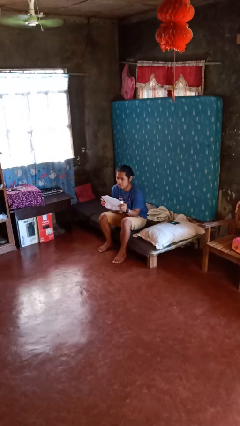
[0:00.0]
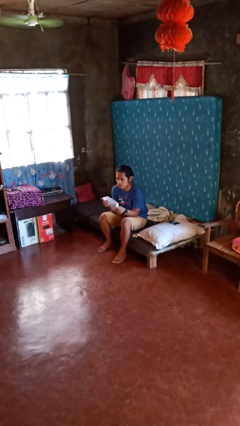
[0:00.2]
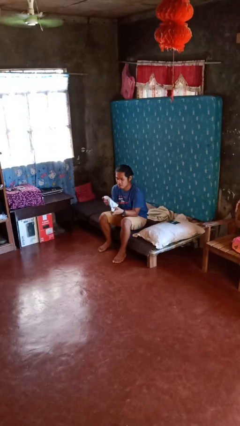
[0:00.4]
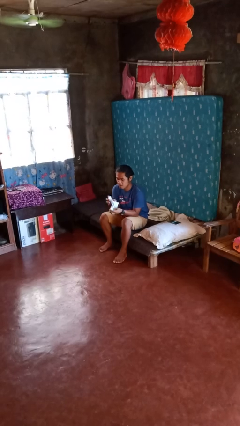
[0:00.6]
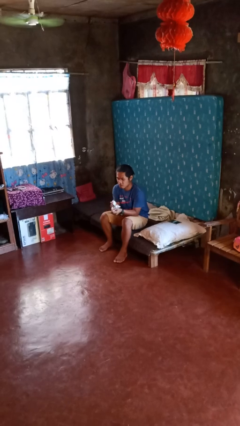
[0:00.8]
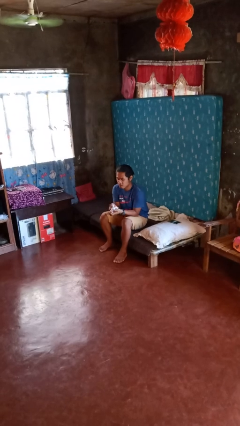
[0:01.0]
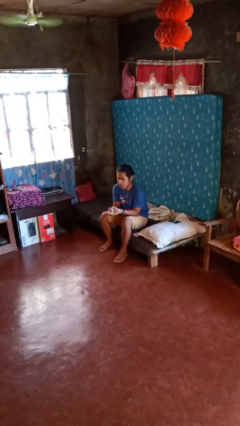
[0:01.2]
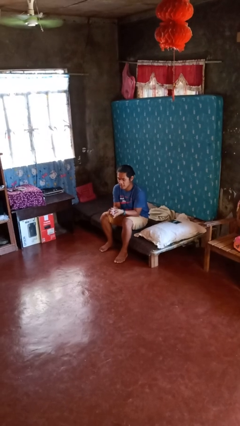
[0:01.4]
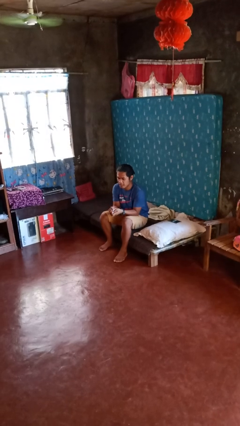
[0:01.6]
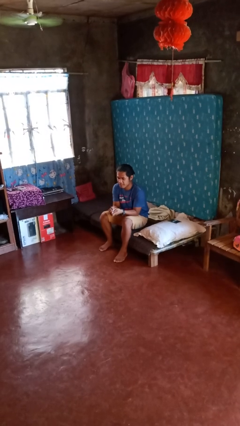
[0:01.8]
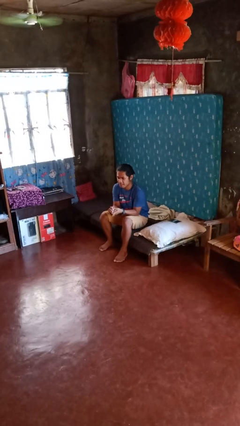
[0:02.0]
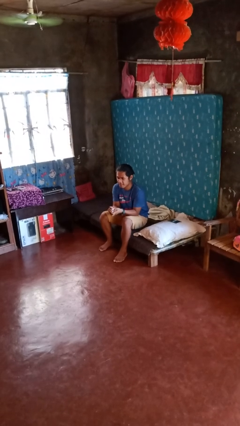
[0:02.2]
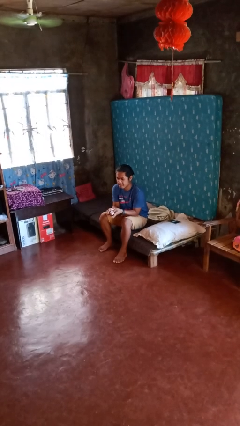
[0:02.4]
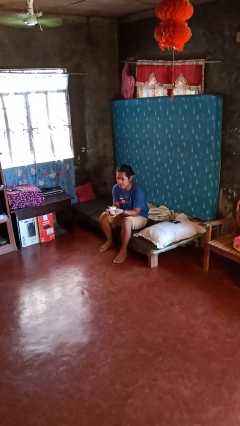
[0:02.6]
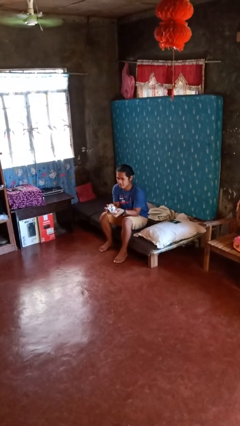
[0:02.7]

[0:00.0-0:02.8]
person crumples paper

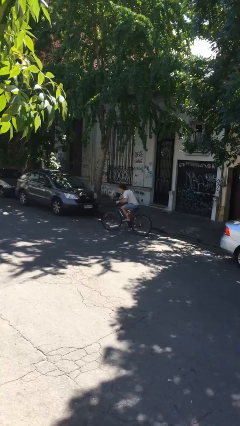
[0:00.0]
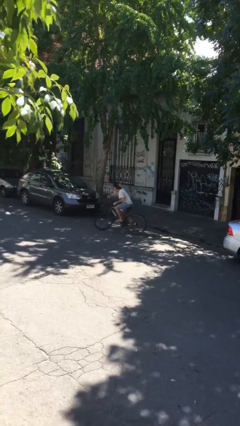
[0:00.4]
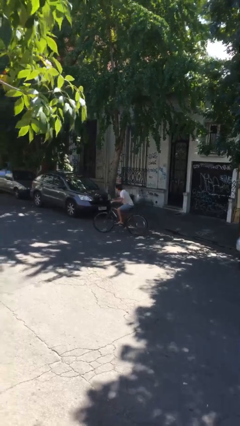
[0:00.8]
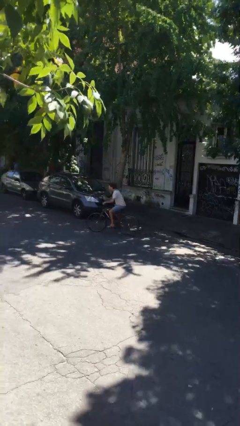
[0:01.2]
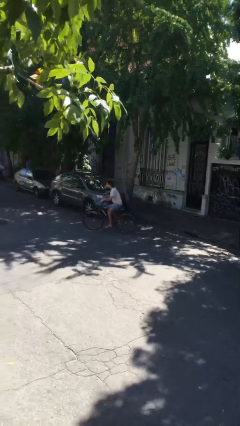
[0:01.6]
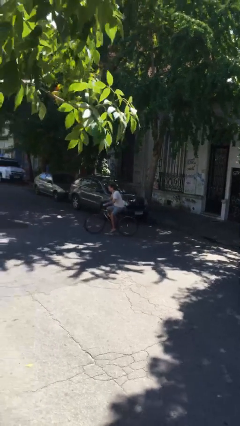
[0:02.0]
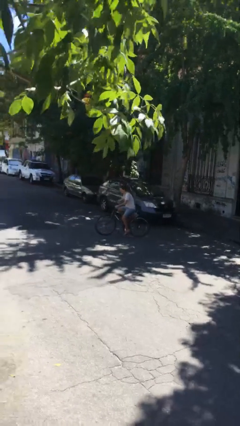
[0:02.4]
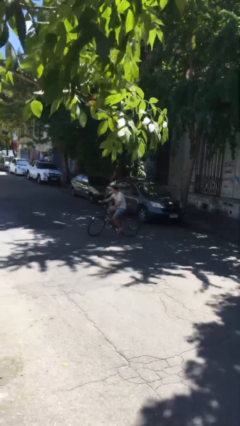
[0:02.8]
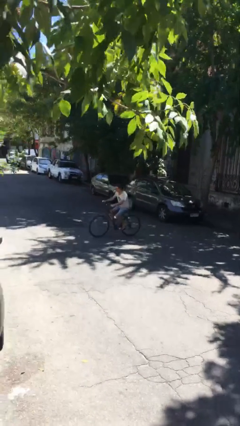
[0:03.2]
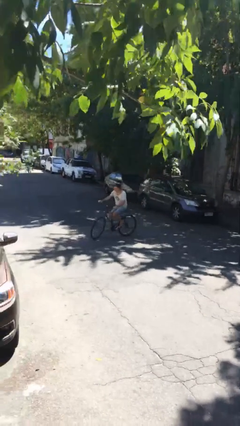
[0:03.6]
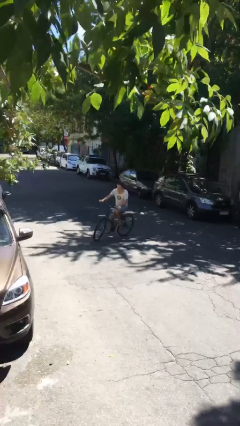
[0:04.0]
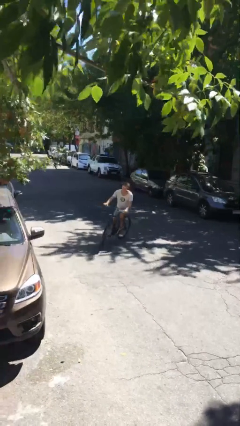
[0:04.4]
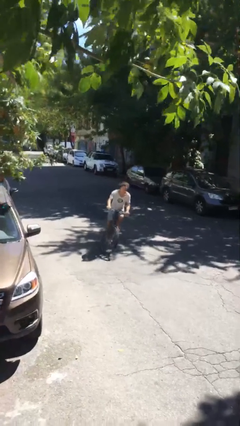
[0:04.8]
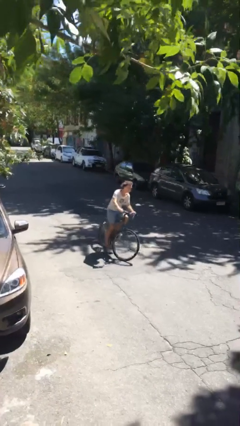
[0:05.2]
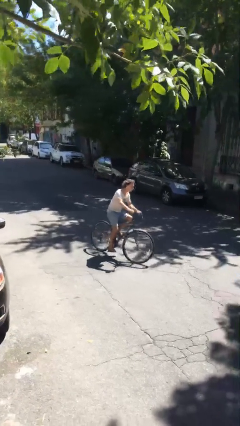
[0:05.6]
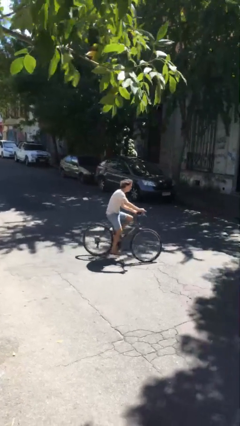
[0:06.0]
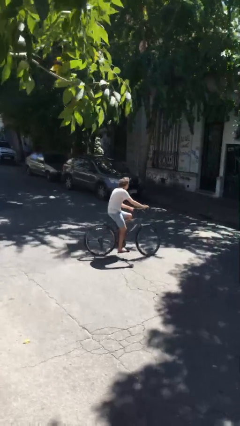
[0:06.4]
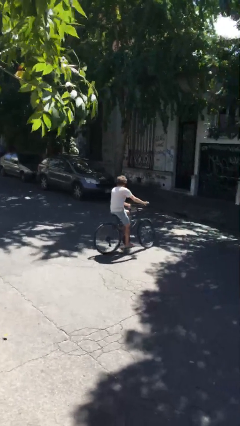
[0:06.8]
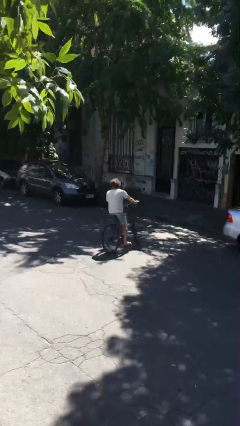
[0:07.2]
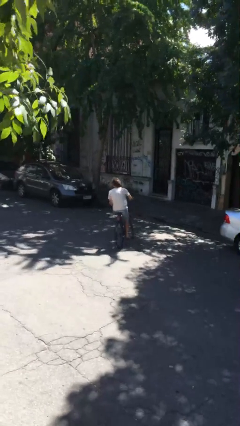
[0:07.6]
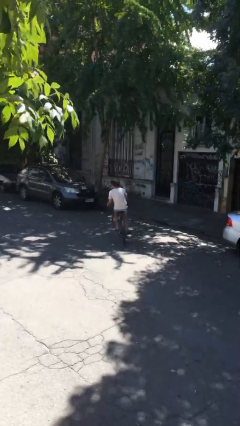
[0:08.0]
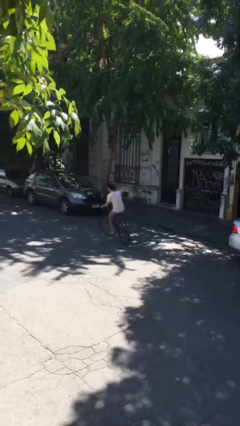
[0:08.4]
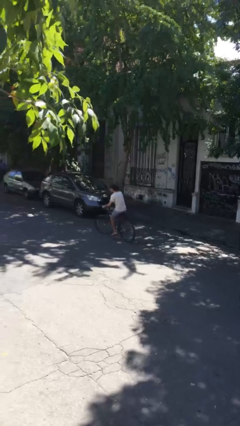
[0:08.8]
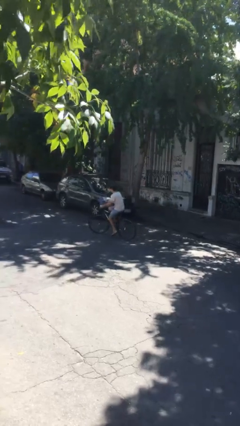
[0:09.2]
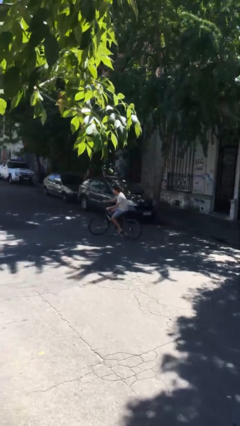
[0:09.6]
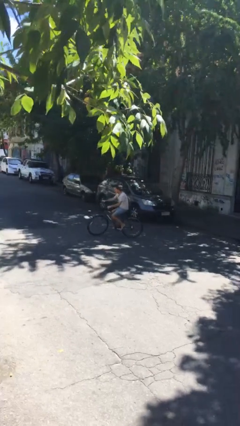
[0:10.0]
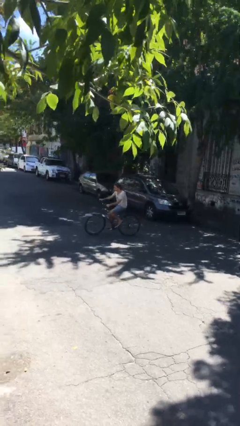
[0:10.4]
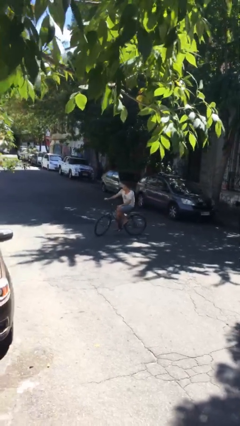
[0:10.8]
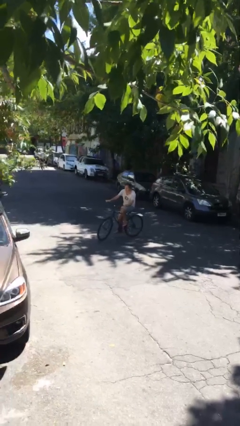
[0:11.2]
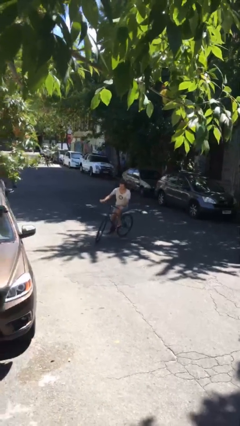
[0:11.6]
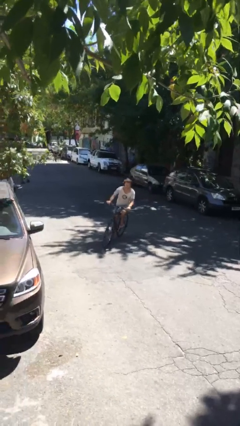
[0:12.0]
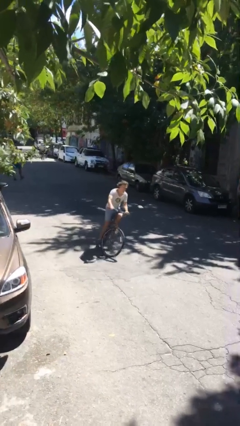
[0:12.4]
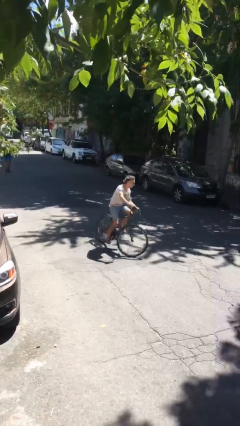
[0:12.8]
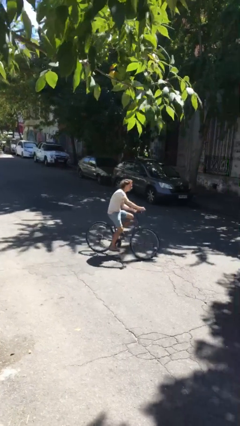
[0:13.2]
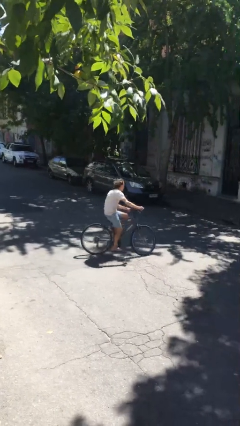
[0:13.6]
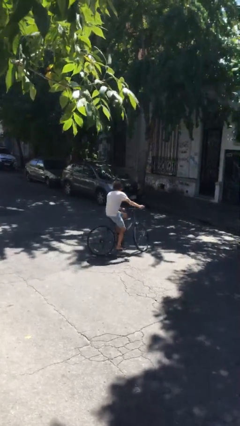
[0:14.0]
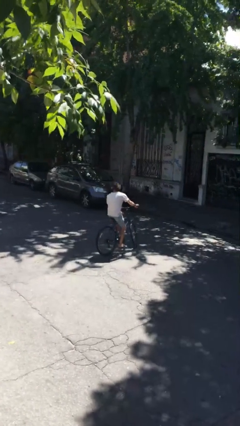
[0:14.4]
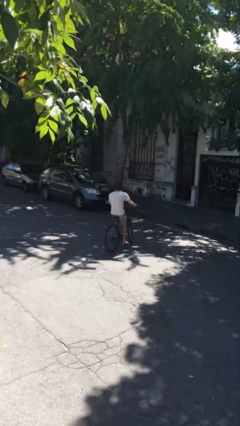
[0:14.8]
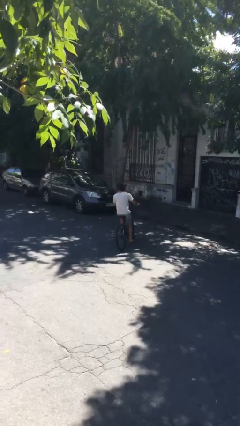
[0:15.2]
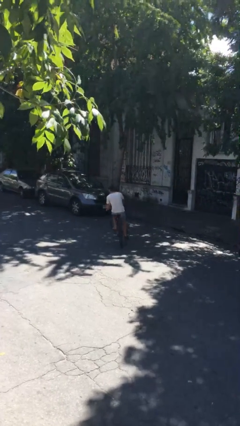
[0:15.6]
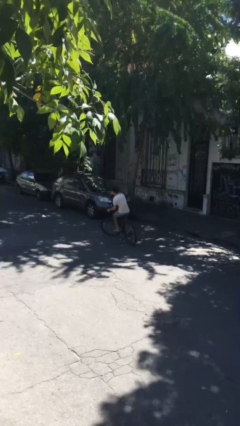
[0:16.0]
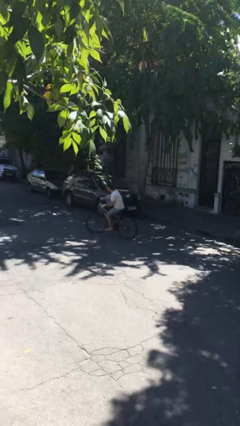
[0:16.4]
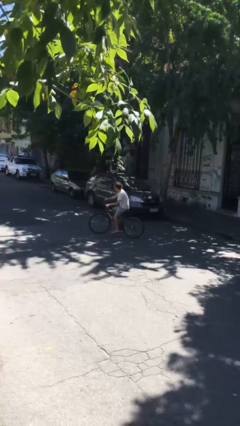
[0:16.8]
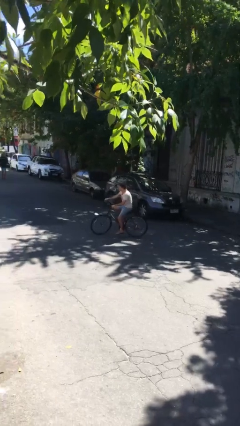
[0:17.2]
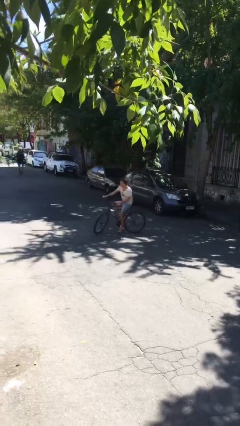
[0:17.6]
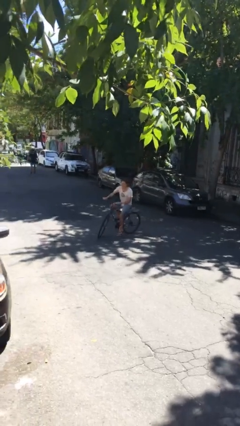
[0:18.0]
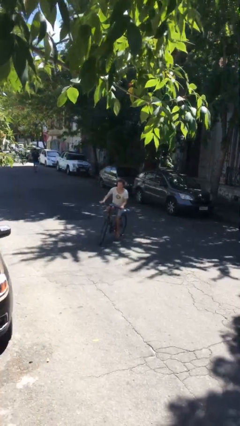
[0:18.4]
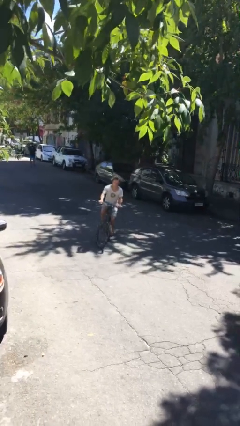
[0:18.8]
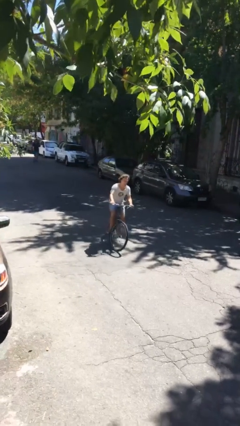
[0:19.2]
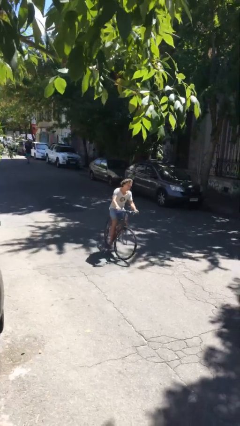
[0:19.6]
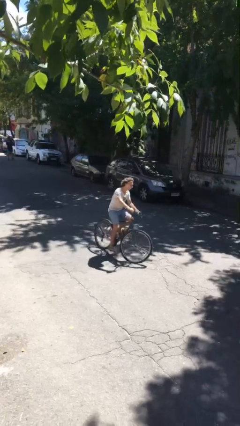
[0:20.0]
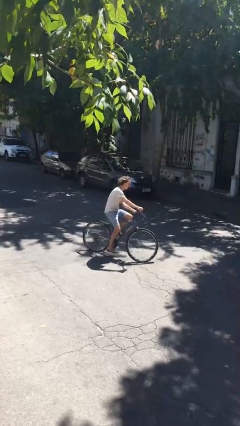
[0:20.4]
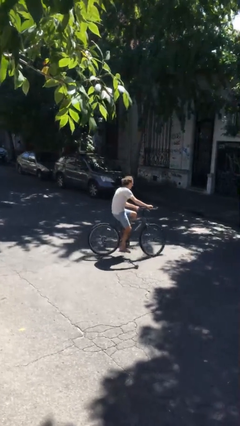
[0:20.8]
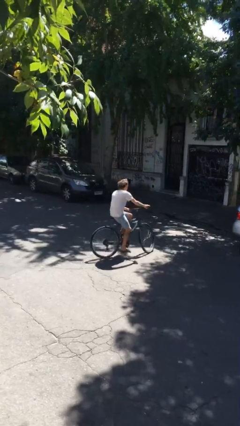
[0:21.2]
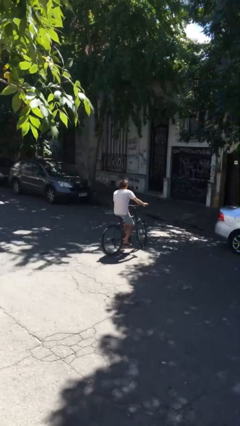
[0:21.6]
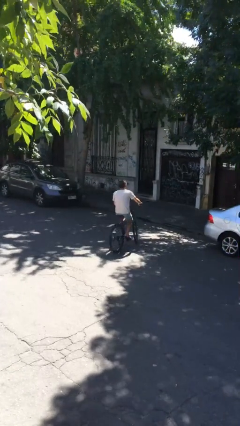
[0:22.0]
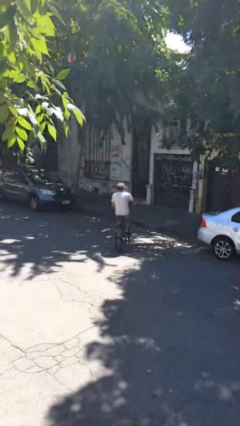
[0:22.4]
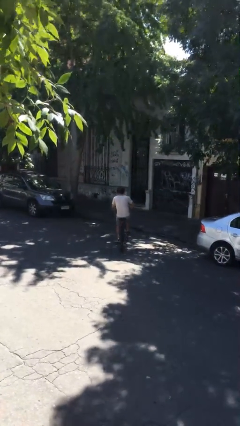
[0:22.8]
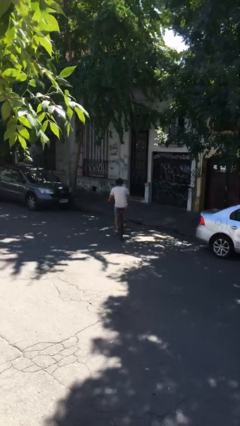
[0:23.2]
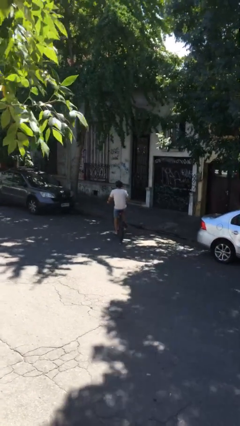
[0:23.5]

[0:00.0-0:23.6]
person rides bicycle

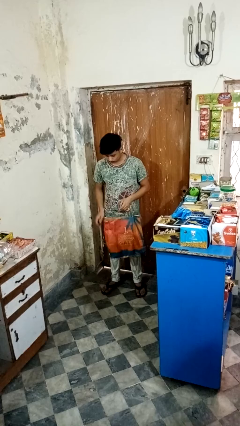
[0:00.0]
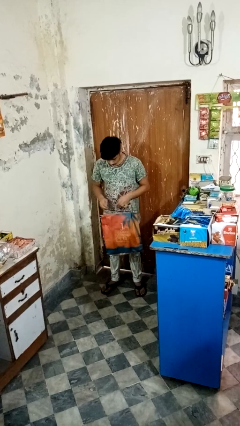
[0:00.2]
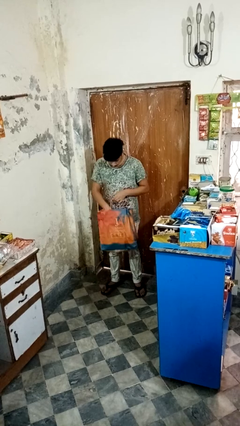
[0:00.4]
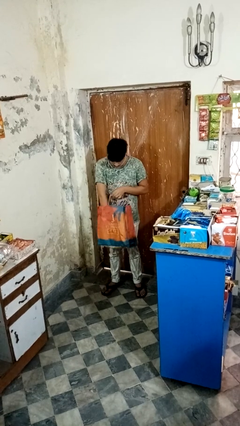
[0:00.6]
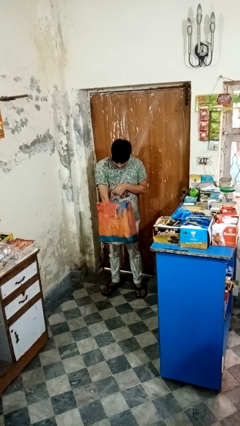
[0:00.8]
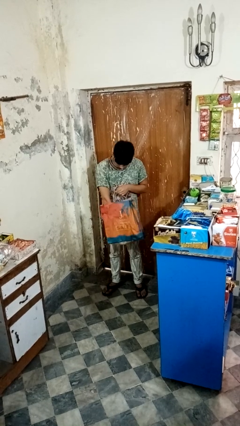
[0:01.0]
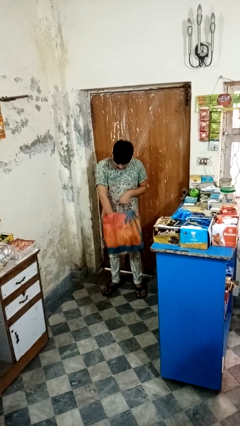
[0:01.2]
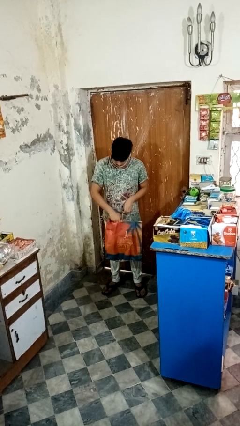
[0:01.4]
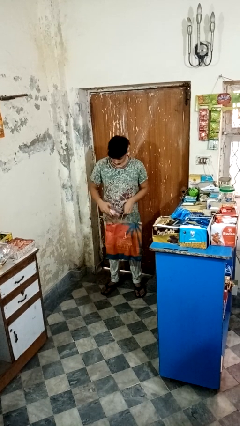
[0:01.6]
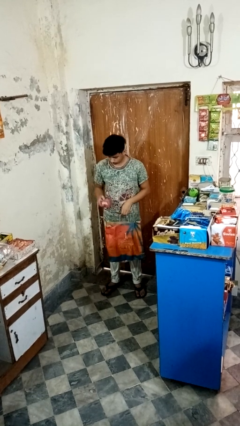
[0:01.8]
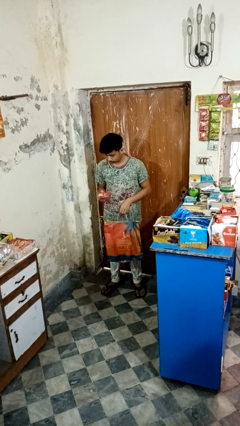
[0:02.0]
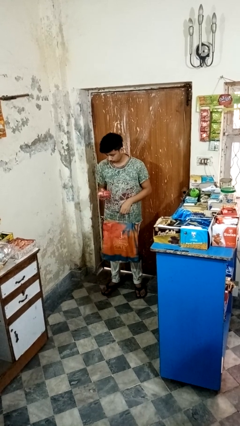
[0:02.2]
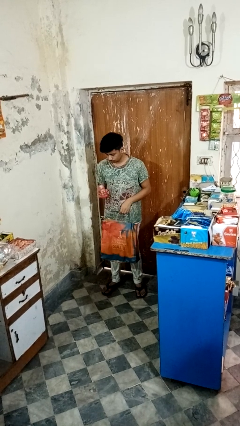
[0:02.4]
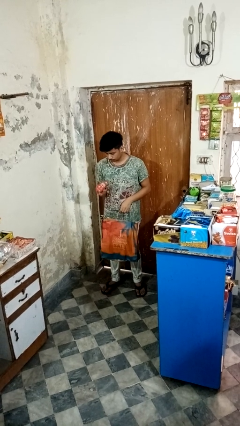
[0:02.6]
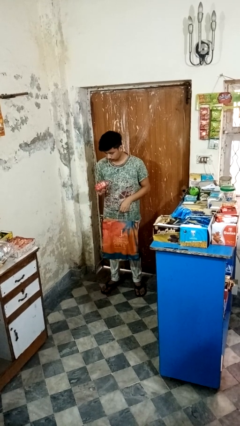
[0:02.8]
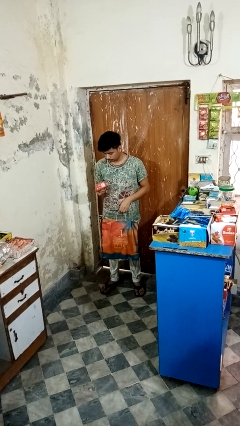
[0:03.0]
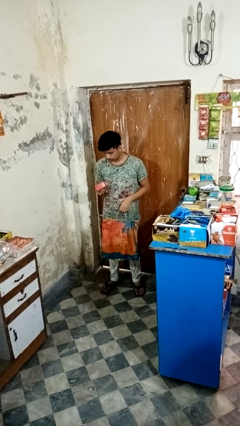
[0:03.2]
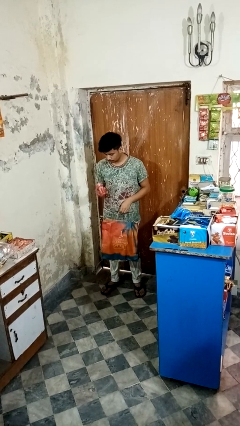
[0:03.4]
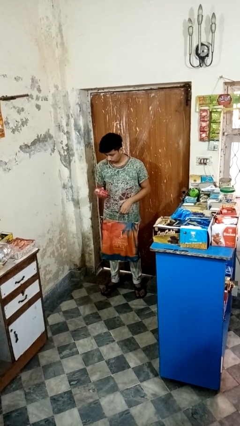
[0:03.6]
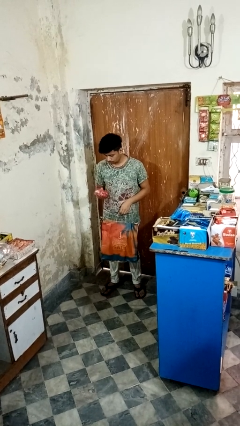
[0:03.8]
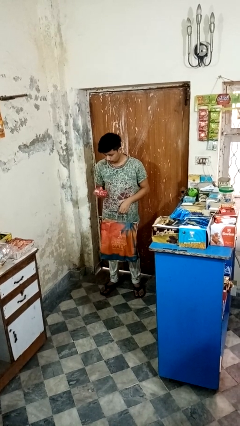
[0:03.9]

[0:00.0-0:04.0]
person takes object from bag
